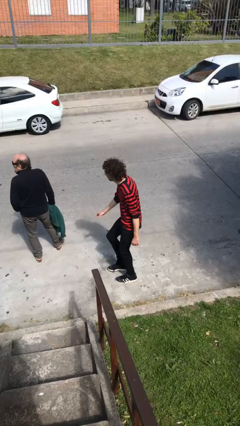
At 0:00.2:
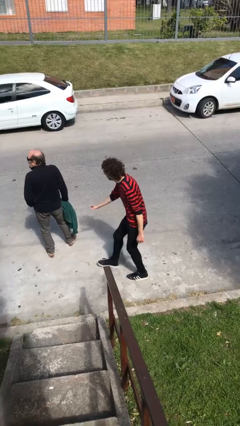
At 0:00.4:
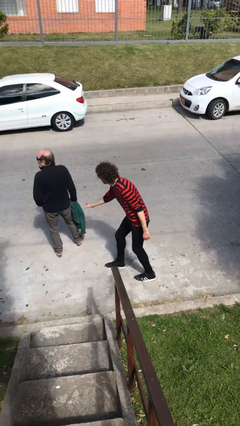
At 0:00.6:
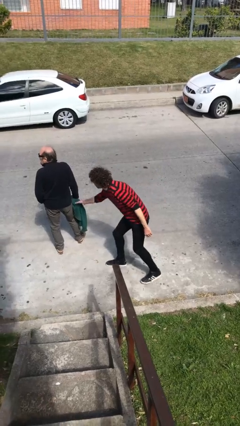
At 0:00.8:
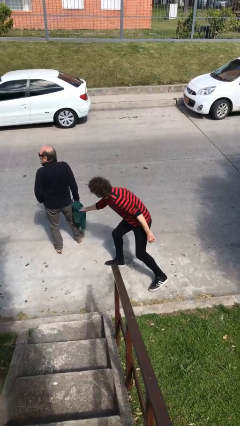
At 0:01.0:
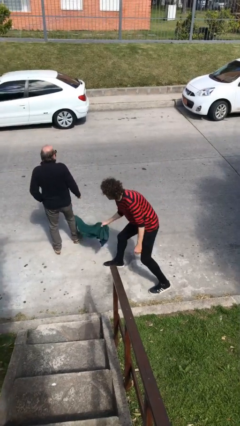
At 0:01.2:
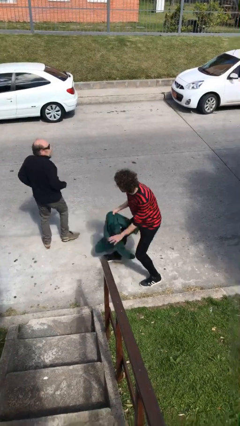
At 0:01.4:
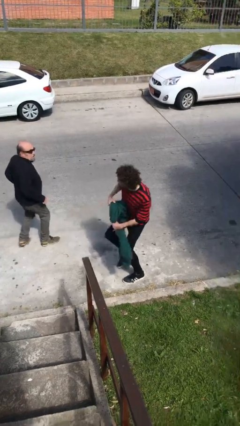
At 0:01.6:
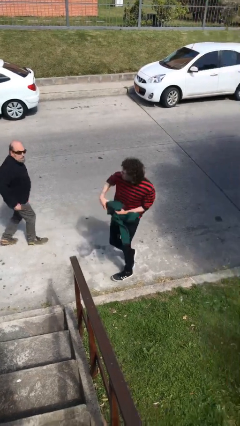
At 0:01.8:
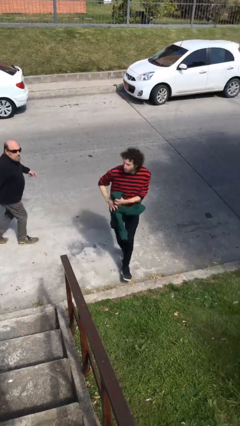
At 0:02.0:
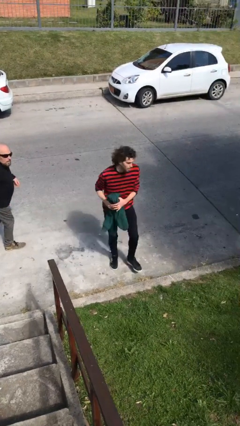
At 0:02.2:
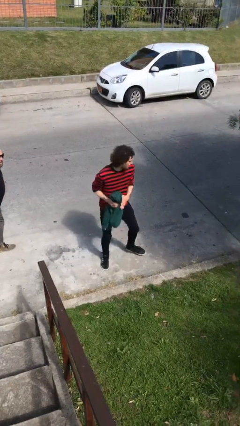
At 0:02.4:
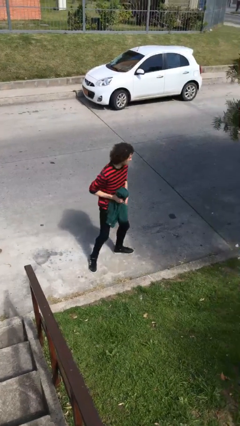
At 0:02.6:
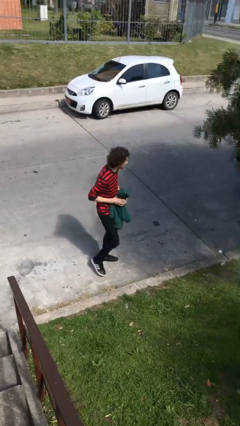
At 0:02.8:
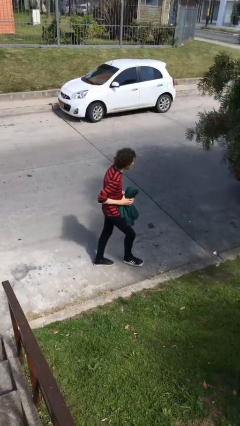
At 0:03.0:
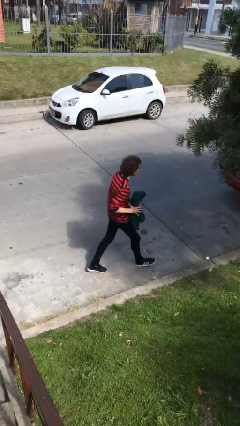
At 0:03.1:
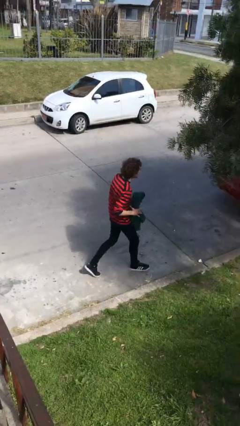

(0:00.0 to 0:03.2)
person steals object from person

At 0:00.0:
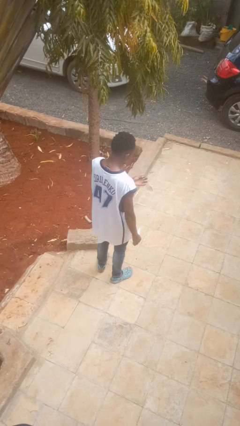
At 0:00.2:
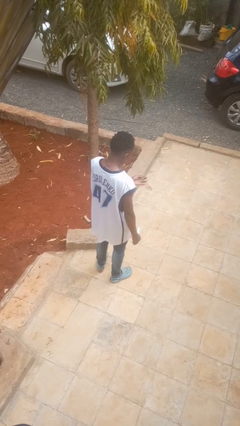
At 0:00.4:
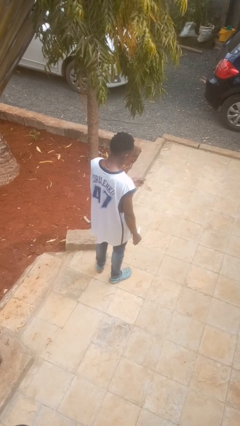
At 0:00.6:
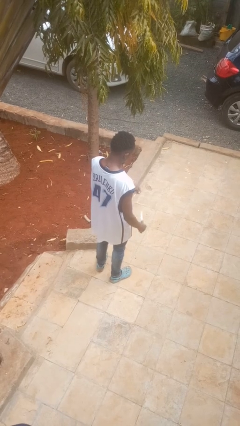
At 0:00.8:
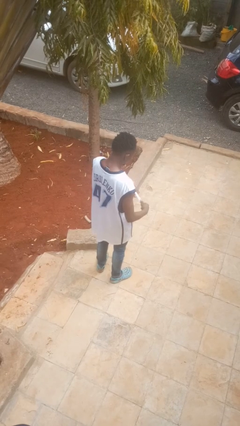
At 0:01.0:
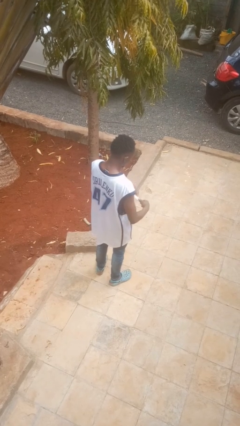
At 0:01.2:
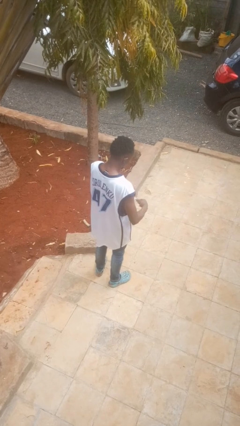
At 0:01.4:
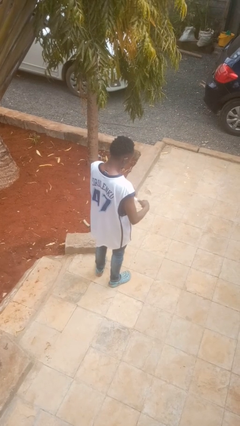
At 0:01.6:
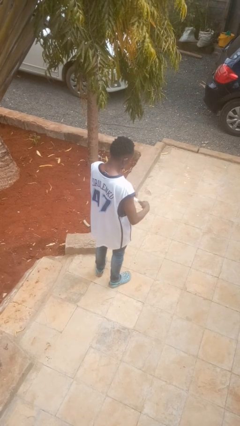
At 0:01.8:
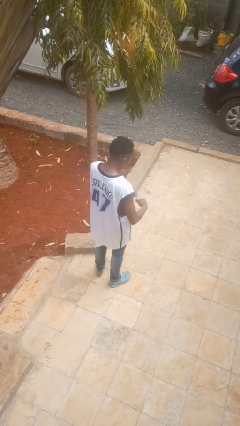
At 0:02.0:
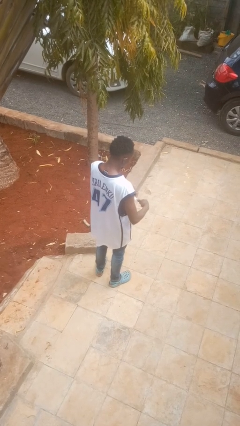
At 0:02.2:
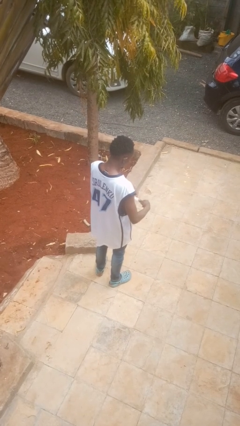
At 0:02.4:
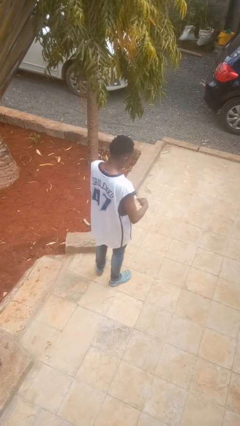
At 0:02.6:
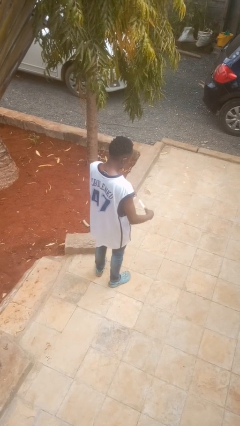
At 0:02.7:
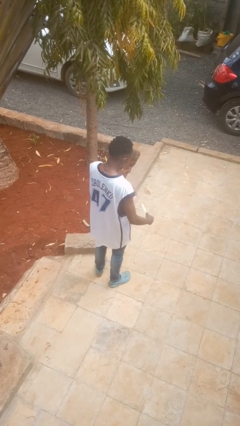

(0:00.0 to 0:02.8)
person files fingernails

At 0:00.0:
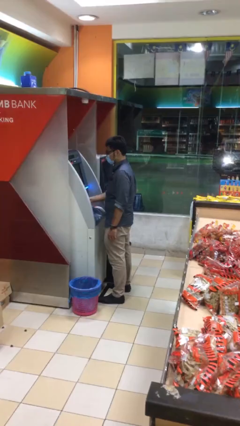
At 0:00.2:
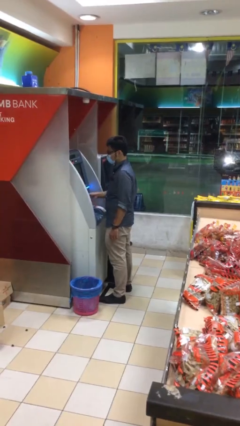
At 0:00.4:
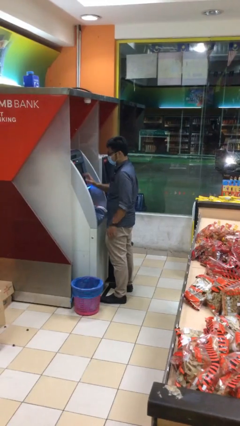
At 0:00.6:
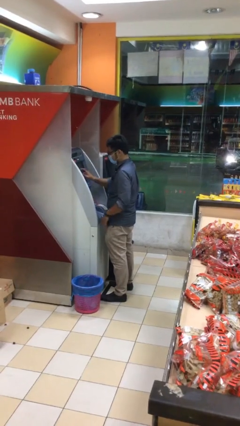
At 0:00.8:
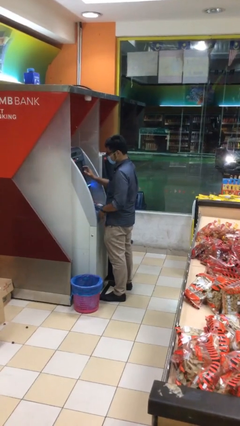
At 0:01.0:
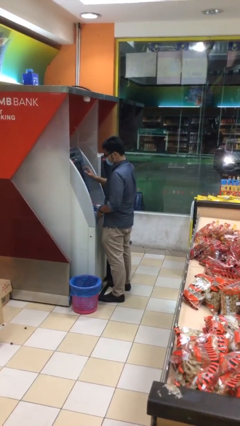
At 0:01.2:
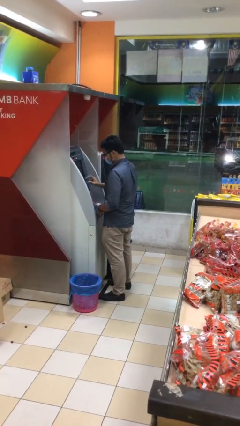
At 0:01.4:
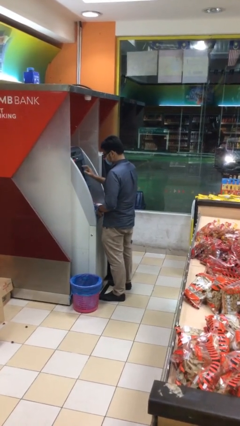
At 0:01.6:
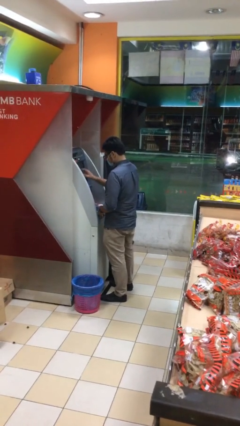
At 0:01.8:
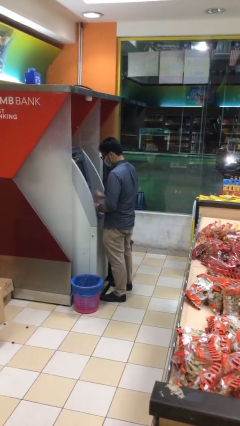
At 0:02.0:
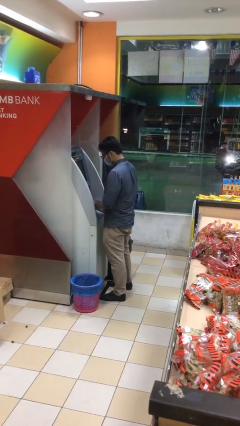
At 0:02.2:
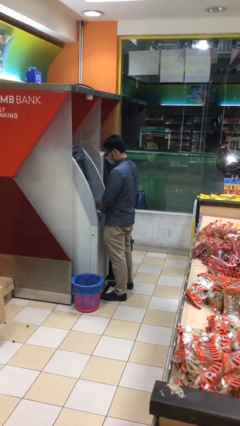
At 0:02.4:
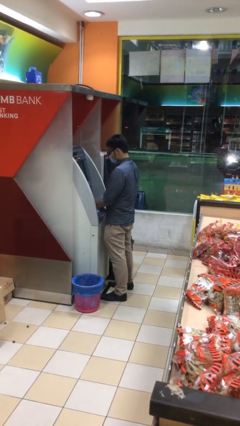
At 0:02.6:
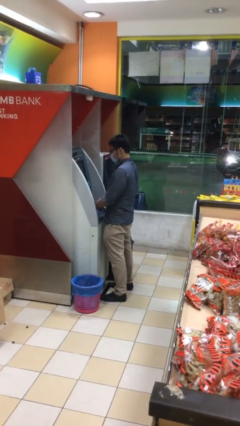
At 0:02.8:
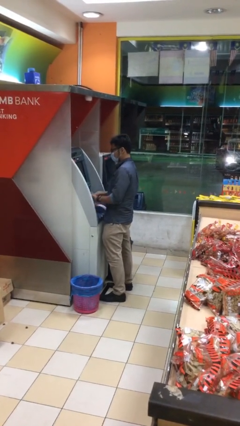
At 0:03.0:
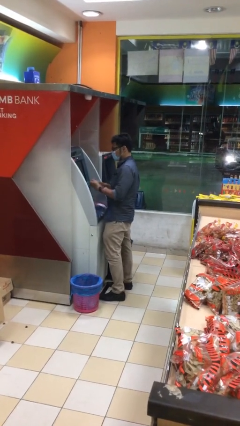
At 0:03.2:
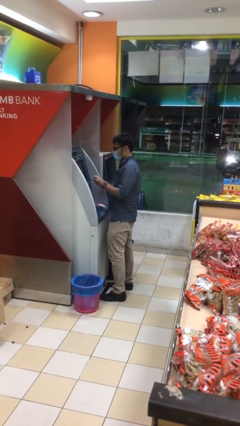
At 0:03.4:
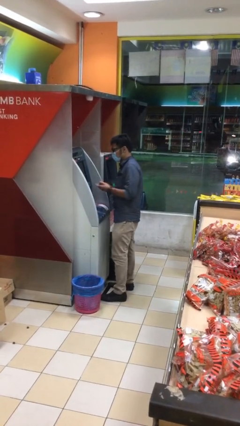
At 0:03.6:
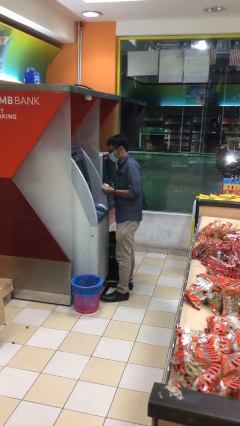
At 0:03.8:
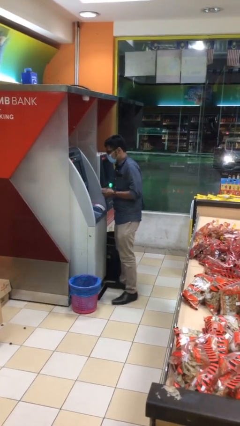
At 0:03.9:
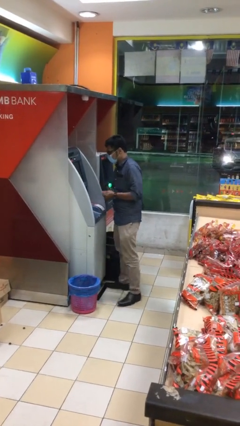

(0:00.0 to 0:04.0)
person purchases from machine

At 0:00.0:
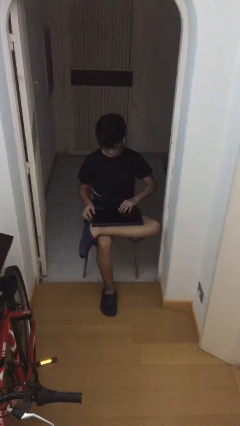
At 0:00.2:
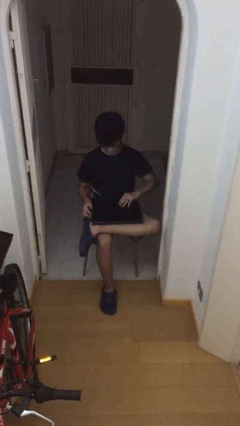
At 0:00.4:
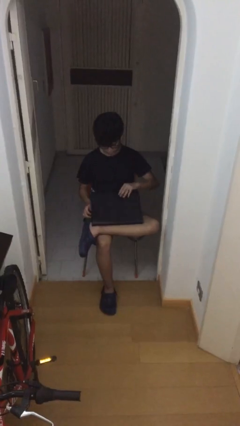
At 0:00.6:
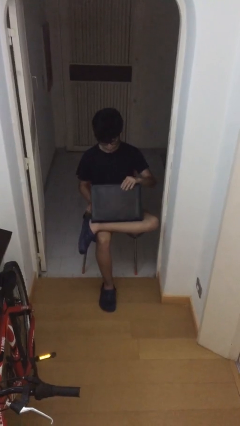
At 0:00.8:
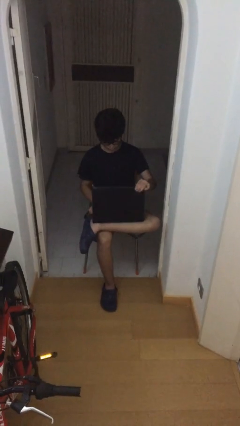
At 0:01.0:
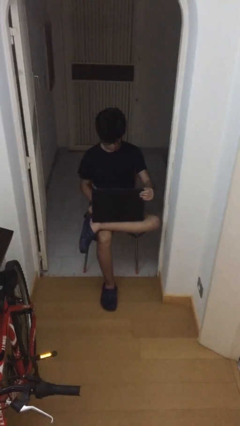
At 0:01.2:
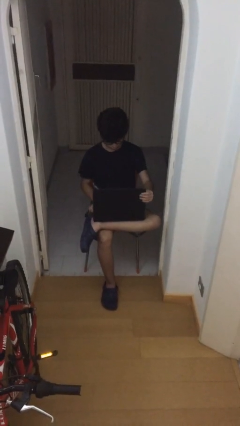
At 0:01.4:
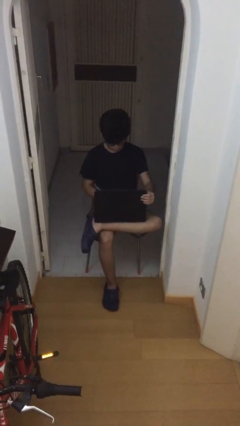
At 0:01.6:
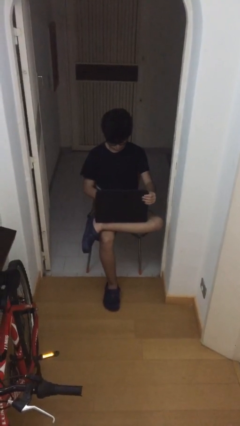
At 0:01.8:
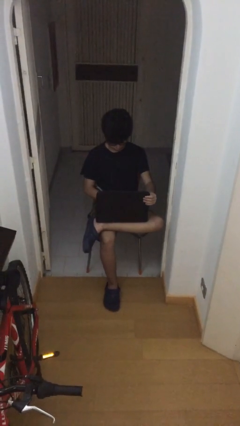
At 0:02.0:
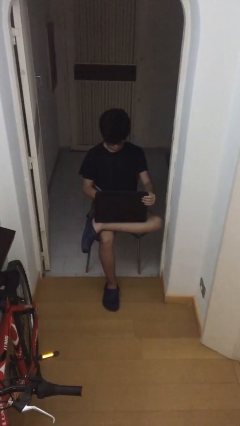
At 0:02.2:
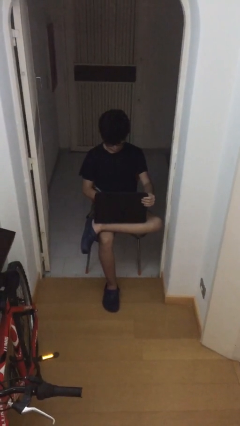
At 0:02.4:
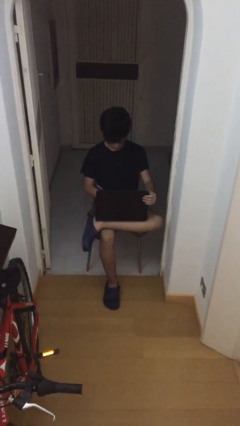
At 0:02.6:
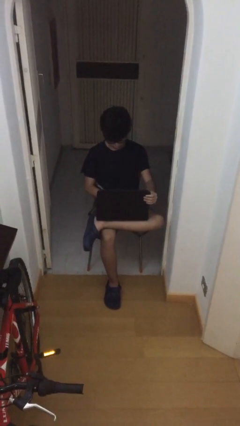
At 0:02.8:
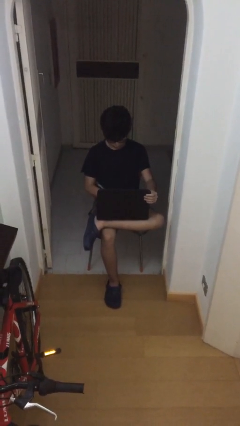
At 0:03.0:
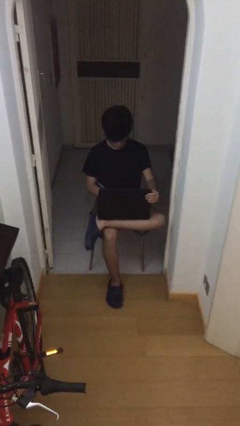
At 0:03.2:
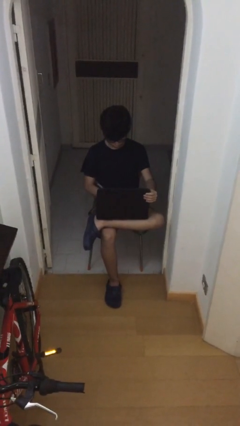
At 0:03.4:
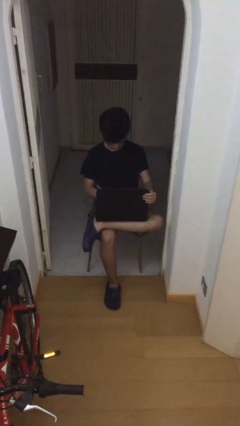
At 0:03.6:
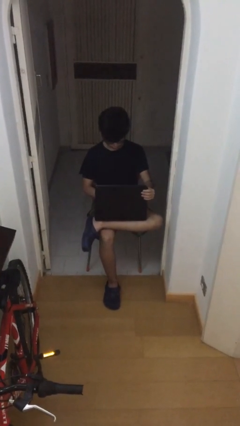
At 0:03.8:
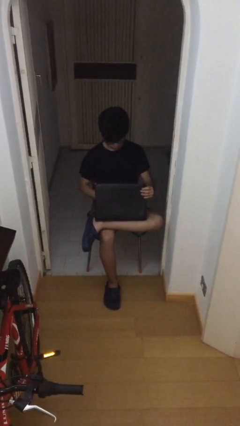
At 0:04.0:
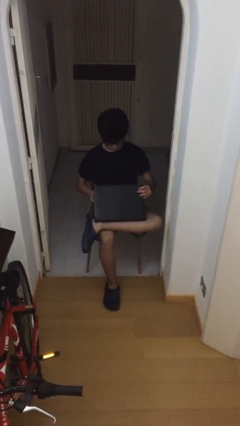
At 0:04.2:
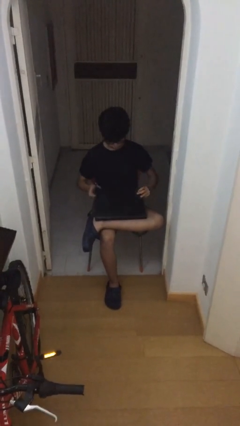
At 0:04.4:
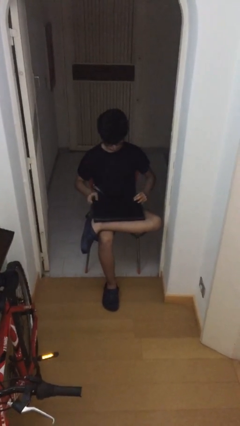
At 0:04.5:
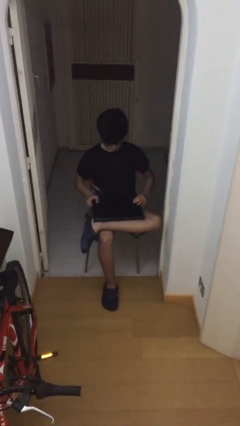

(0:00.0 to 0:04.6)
person interacts with laptop

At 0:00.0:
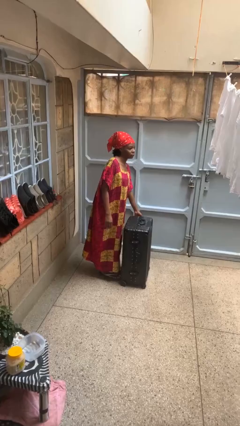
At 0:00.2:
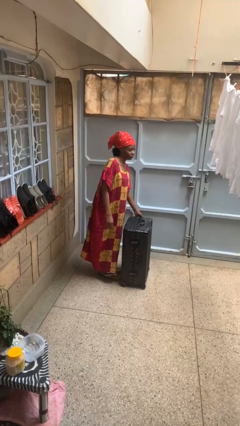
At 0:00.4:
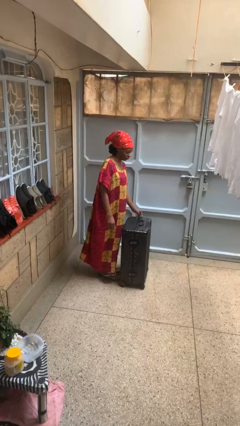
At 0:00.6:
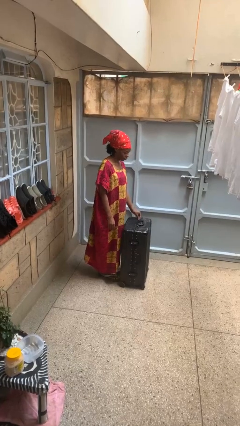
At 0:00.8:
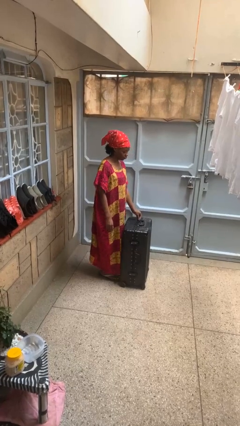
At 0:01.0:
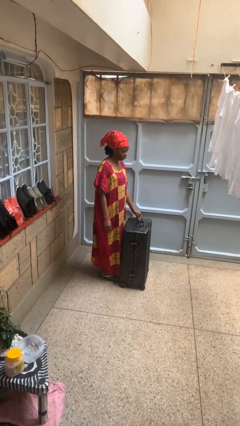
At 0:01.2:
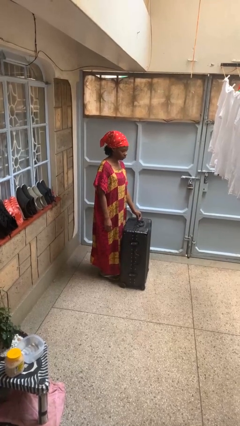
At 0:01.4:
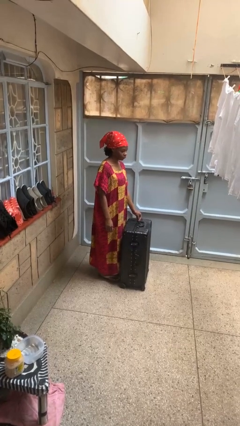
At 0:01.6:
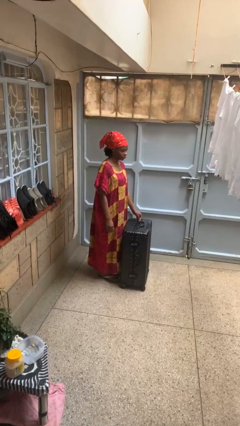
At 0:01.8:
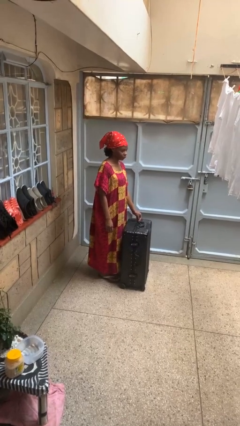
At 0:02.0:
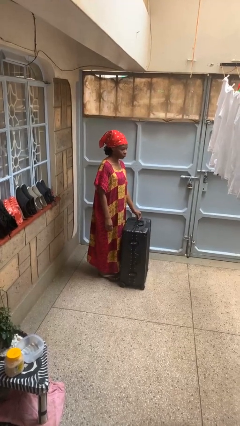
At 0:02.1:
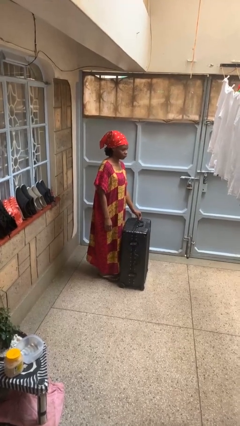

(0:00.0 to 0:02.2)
person opens suitcase

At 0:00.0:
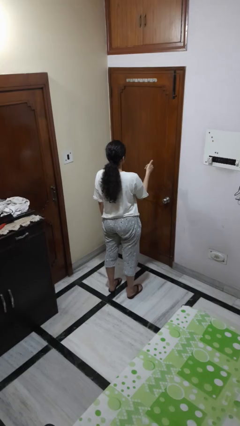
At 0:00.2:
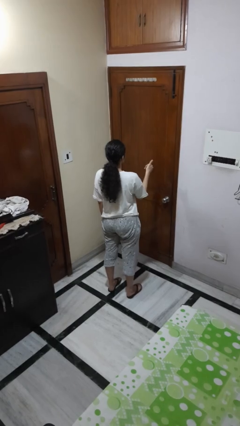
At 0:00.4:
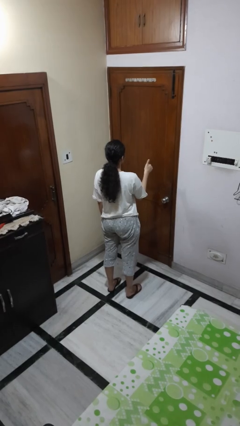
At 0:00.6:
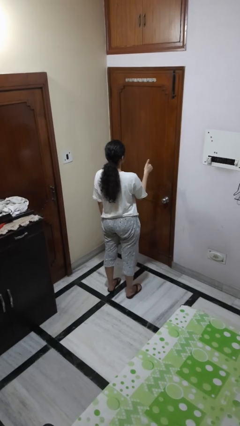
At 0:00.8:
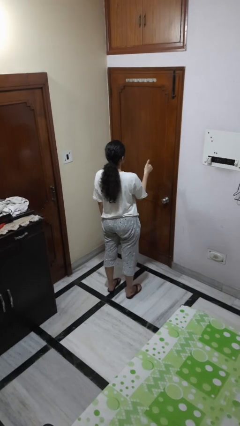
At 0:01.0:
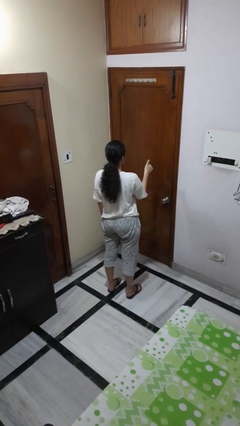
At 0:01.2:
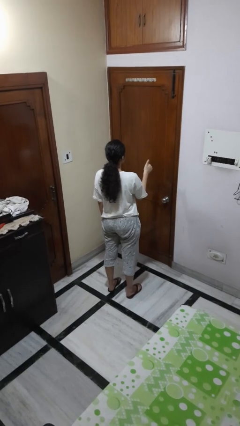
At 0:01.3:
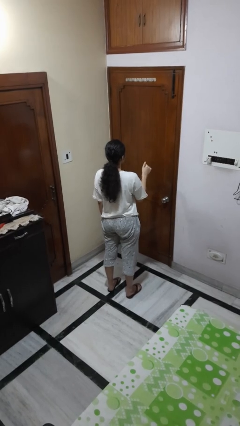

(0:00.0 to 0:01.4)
person gestures hang loose
